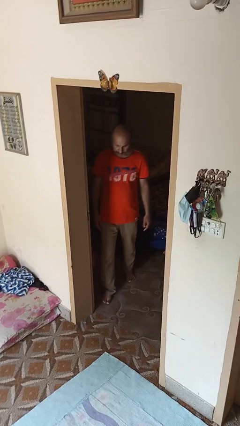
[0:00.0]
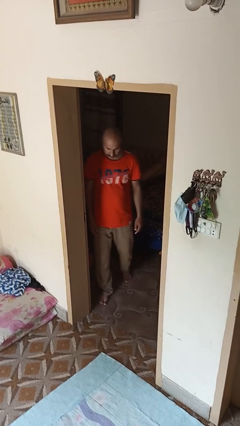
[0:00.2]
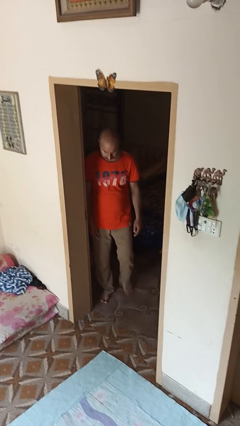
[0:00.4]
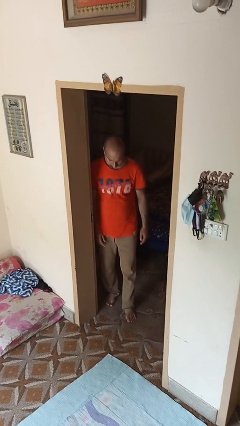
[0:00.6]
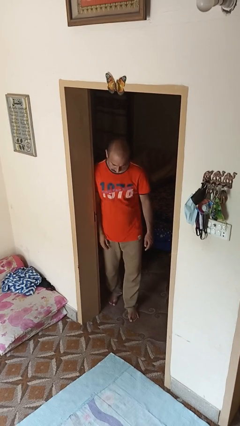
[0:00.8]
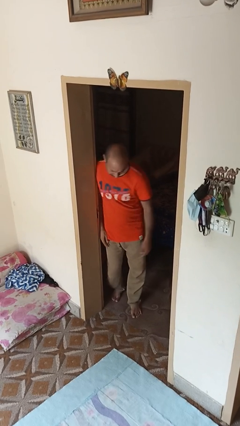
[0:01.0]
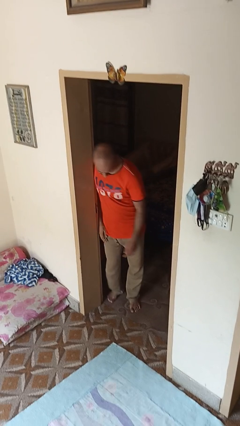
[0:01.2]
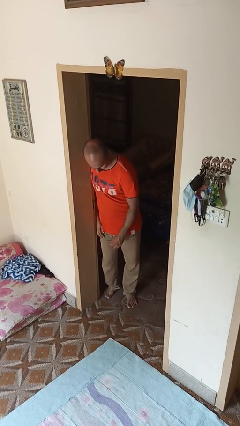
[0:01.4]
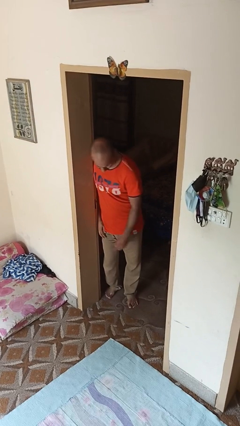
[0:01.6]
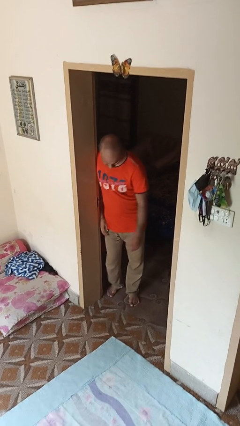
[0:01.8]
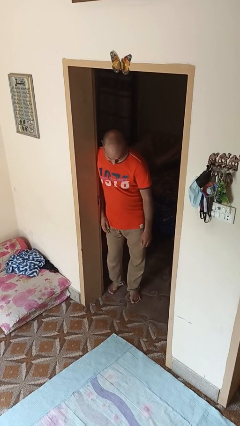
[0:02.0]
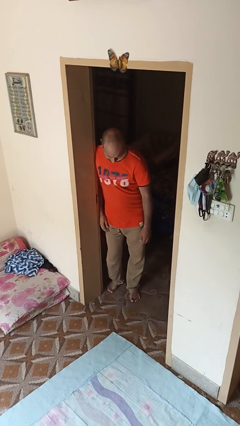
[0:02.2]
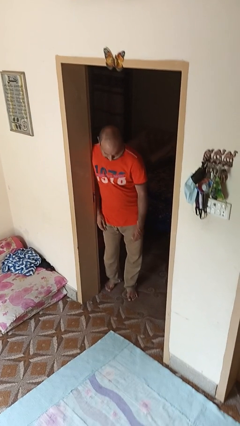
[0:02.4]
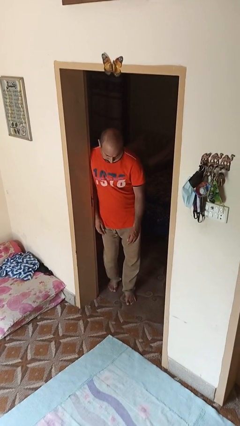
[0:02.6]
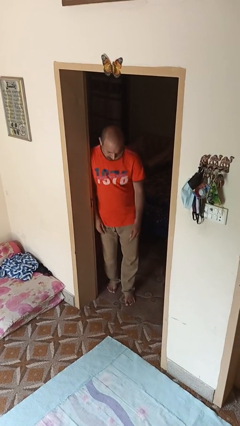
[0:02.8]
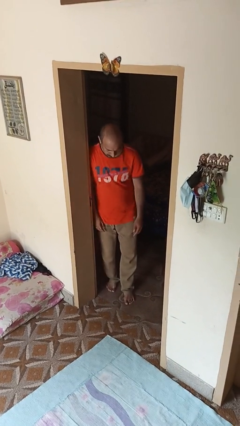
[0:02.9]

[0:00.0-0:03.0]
person bumps into wall

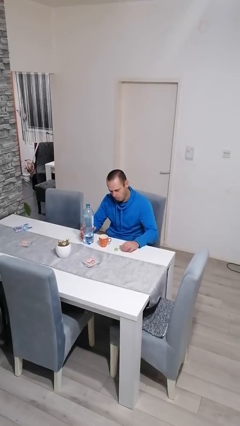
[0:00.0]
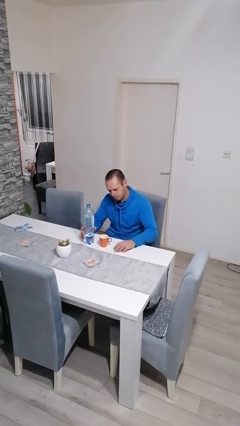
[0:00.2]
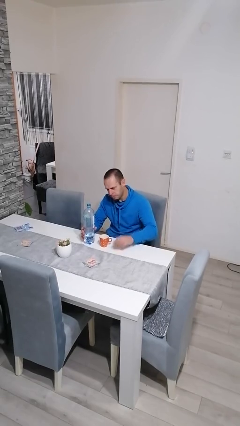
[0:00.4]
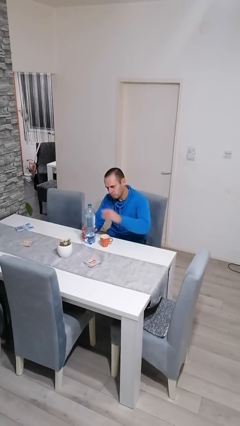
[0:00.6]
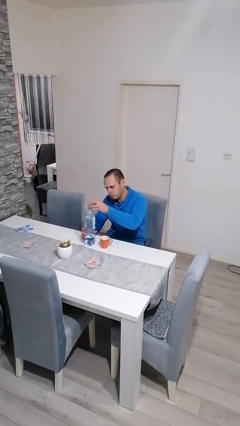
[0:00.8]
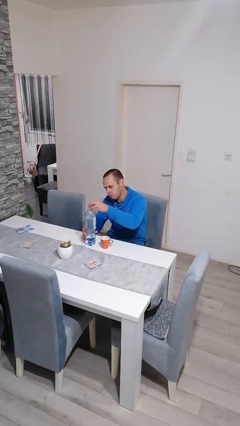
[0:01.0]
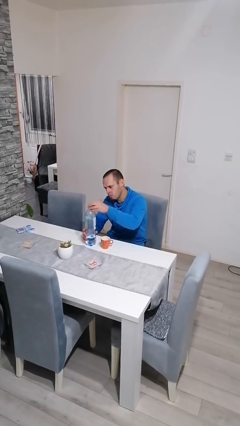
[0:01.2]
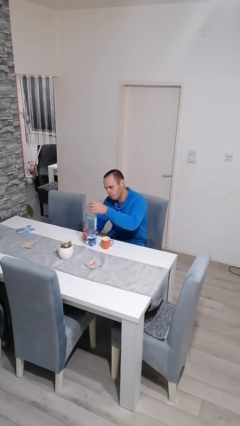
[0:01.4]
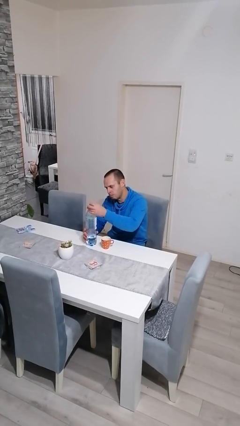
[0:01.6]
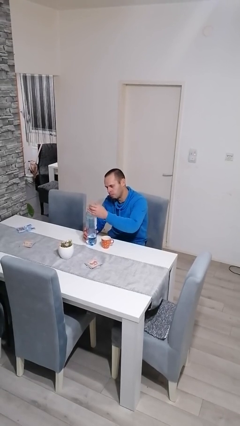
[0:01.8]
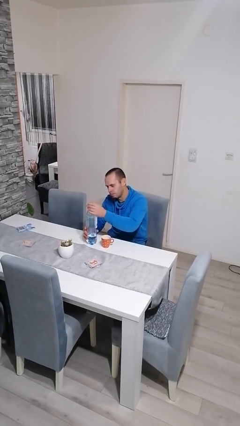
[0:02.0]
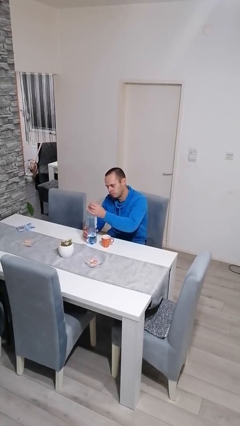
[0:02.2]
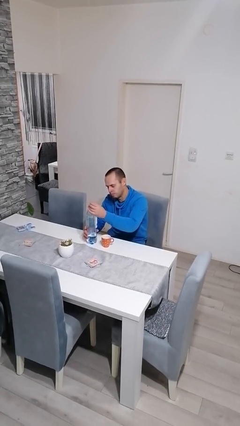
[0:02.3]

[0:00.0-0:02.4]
person screws lid to bottle

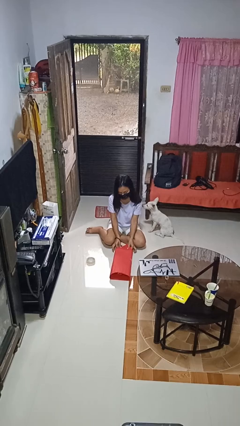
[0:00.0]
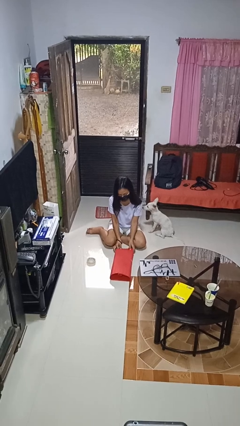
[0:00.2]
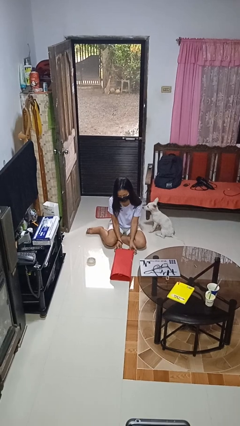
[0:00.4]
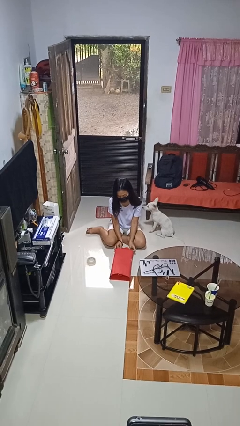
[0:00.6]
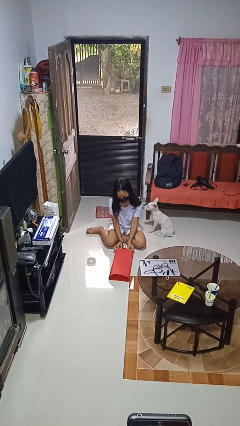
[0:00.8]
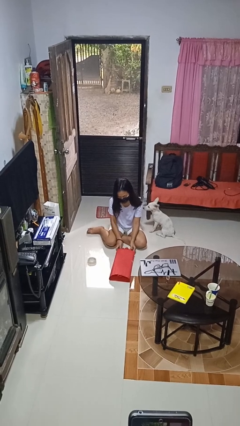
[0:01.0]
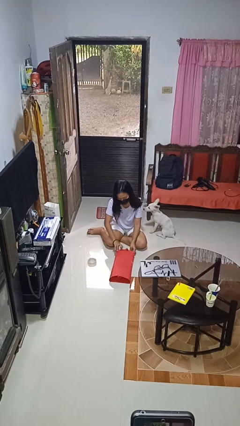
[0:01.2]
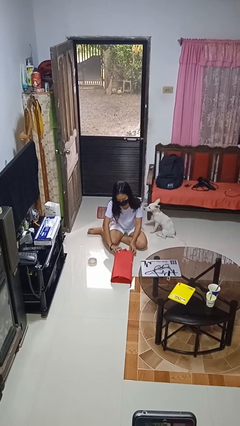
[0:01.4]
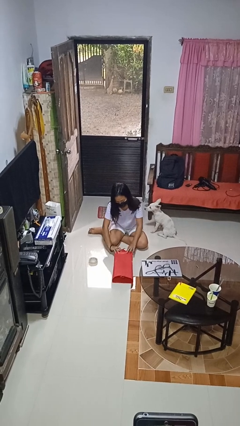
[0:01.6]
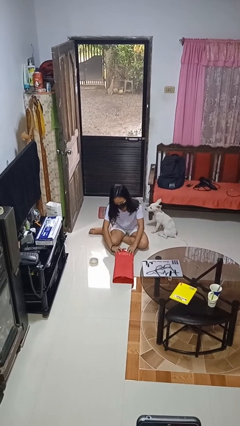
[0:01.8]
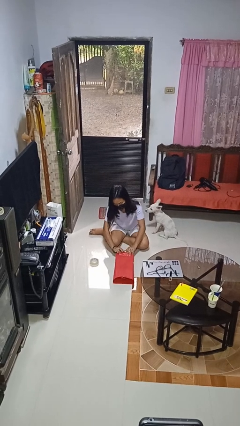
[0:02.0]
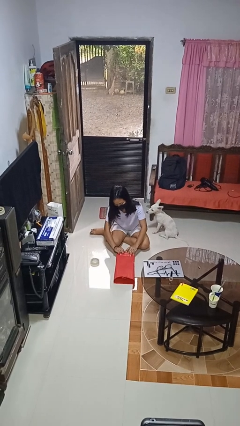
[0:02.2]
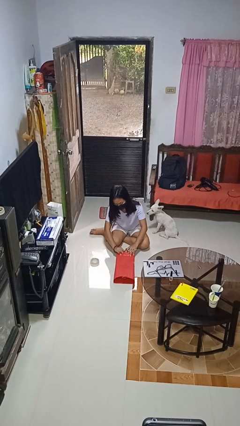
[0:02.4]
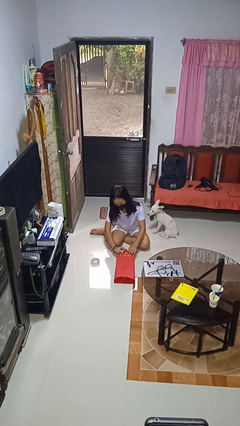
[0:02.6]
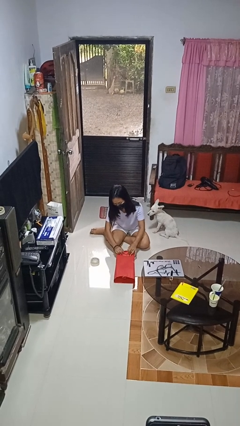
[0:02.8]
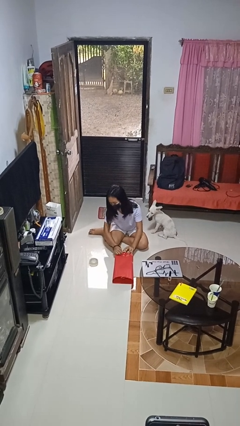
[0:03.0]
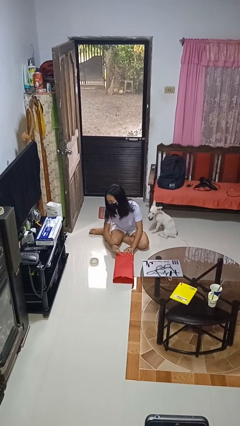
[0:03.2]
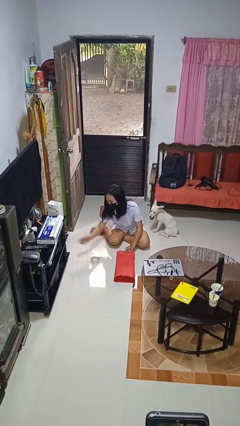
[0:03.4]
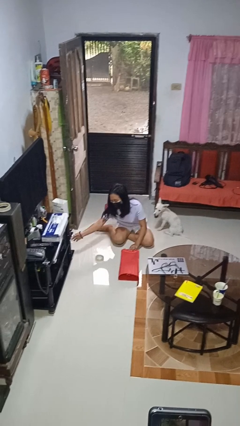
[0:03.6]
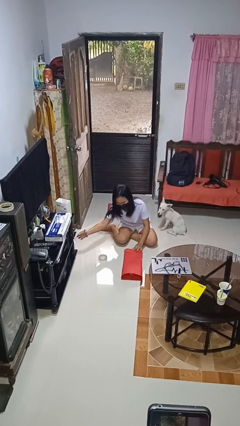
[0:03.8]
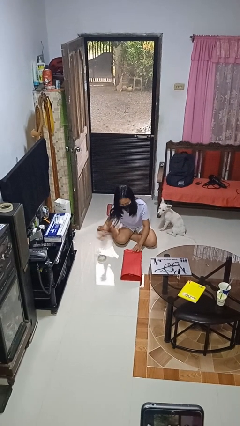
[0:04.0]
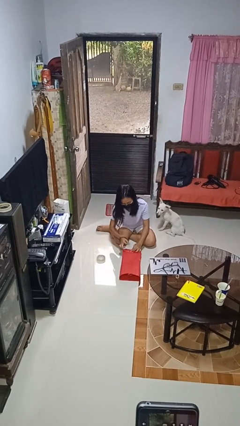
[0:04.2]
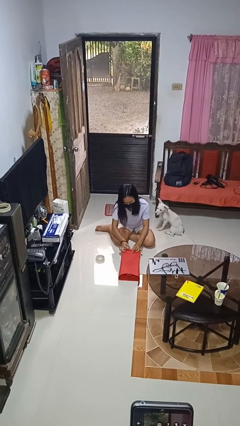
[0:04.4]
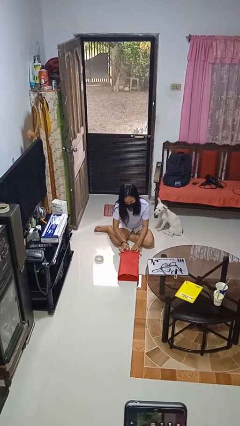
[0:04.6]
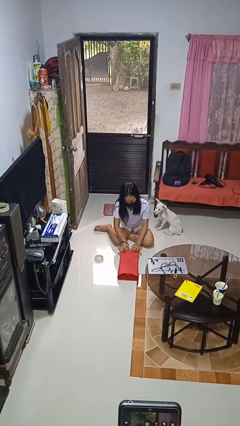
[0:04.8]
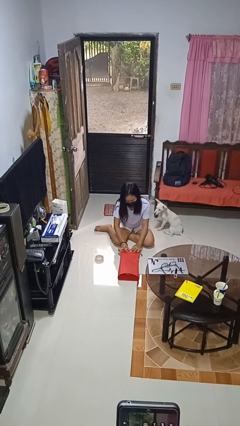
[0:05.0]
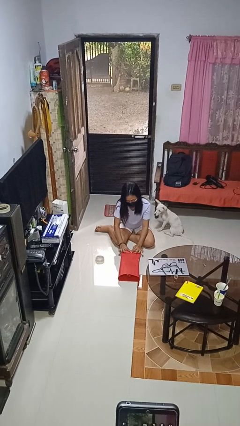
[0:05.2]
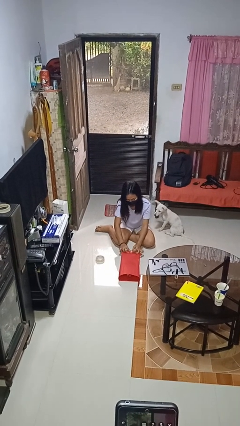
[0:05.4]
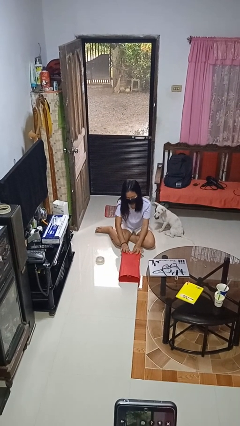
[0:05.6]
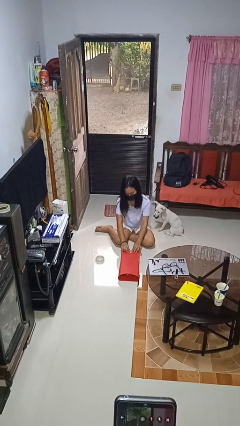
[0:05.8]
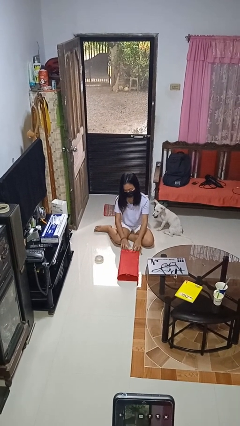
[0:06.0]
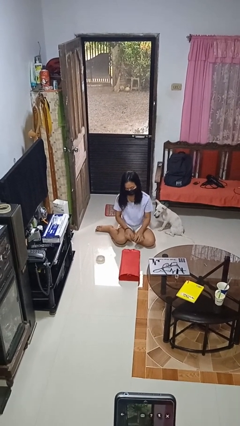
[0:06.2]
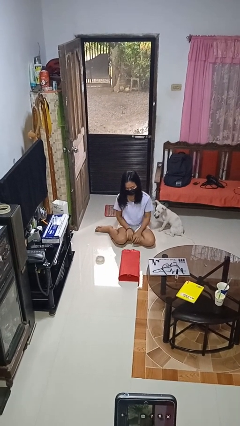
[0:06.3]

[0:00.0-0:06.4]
person wraps box

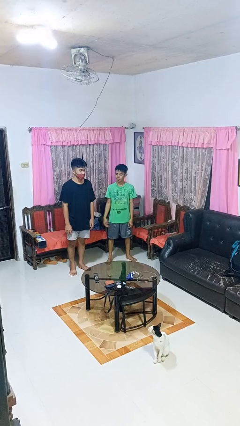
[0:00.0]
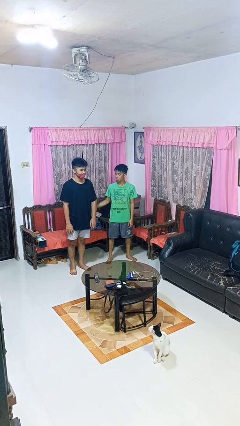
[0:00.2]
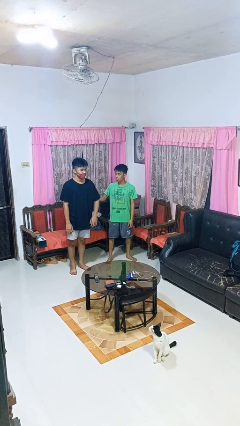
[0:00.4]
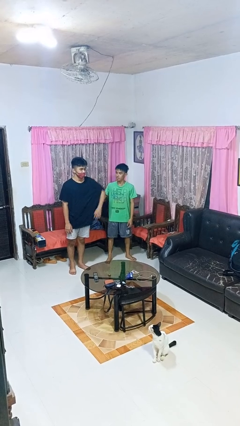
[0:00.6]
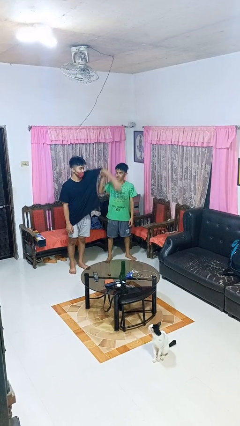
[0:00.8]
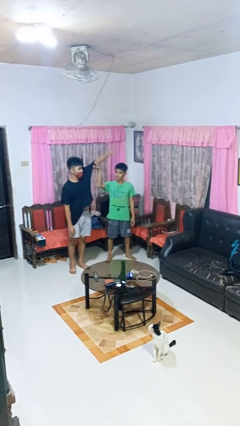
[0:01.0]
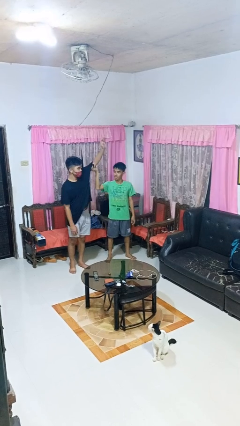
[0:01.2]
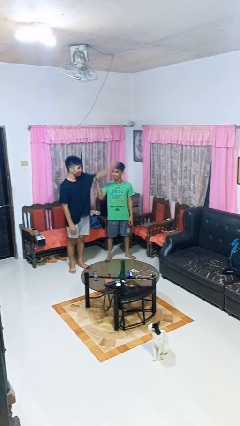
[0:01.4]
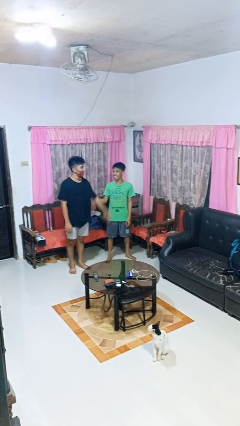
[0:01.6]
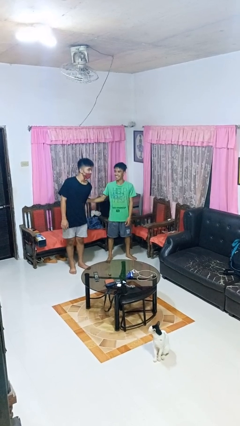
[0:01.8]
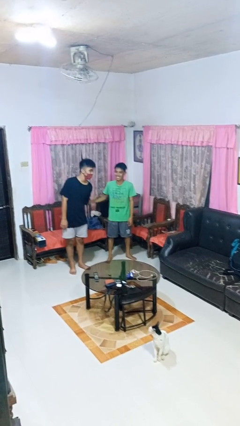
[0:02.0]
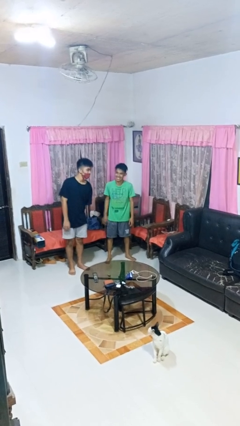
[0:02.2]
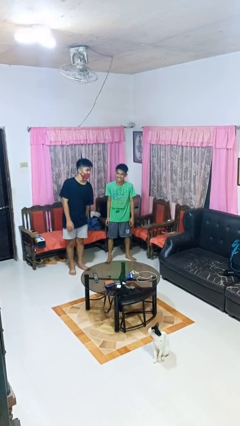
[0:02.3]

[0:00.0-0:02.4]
person grabs person by bicep

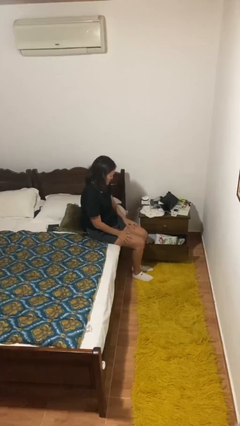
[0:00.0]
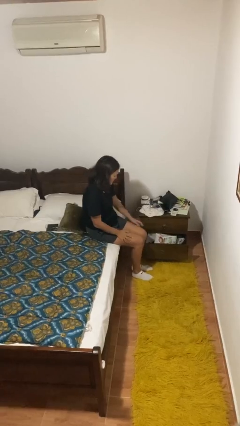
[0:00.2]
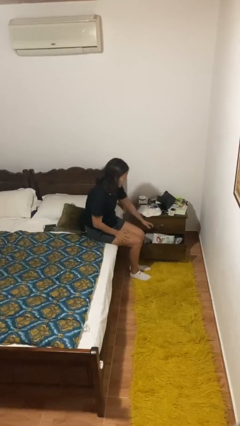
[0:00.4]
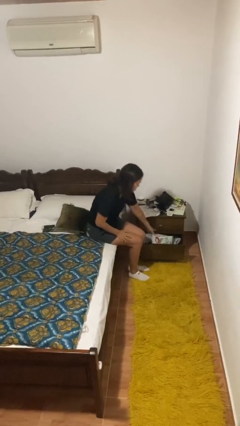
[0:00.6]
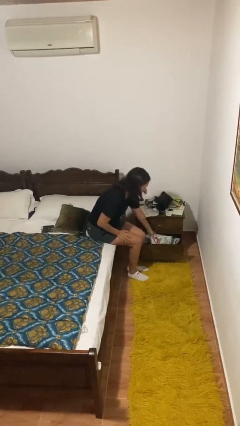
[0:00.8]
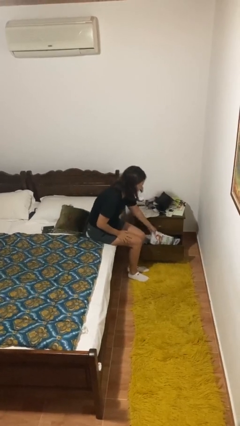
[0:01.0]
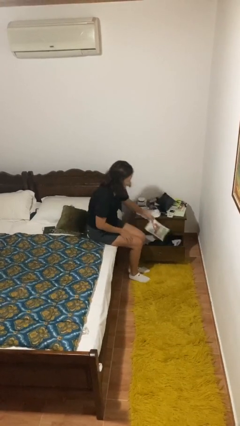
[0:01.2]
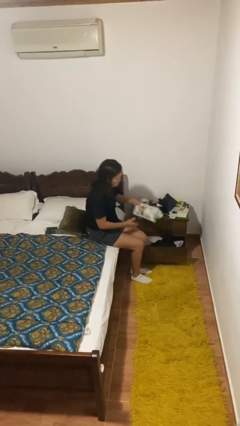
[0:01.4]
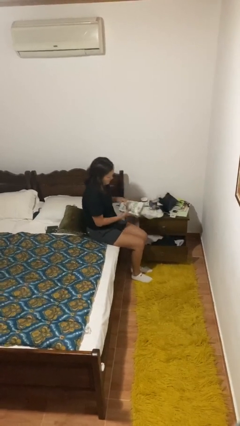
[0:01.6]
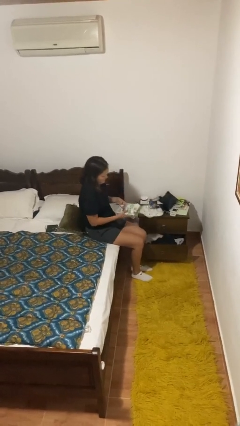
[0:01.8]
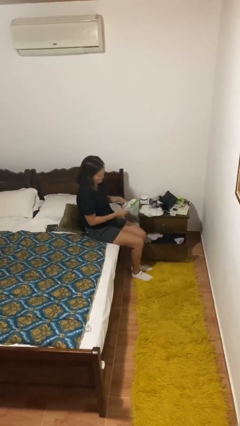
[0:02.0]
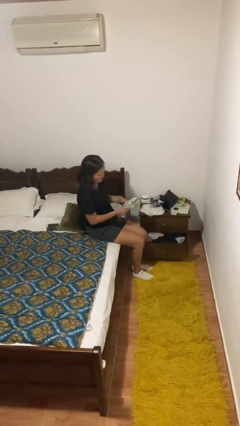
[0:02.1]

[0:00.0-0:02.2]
person picks up object from cabinet

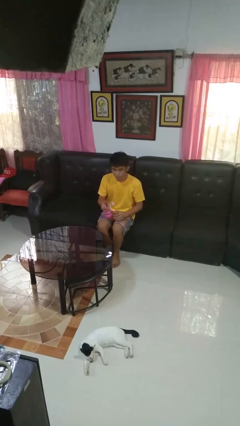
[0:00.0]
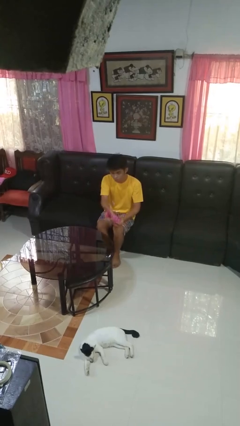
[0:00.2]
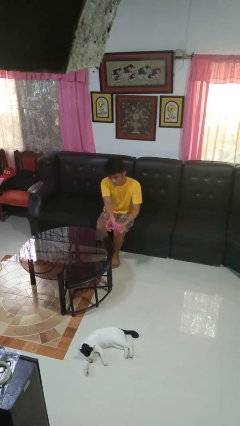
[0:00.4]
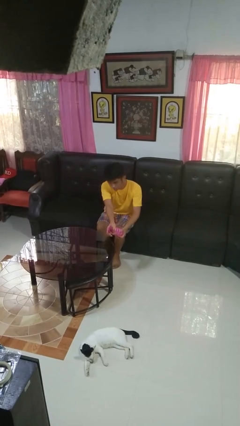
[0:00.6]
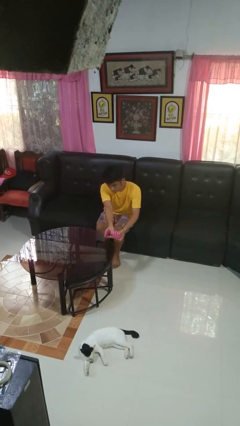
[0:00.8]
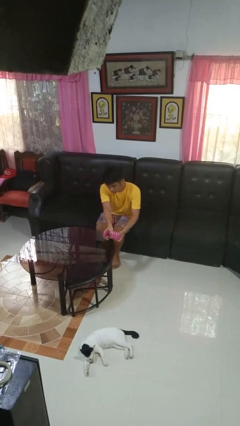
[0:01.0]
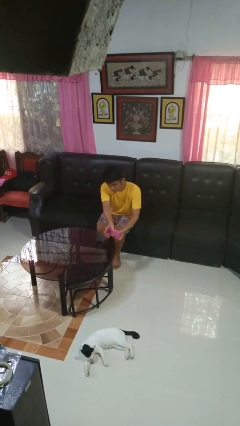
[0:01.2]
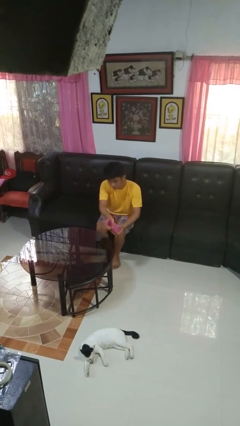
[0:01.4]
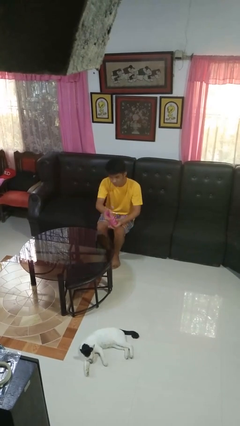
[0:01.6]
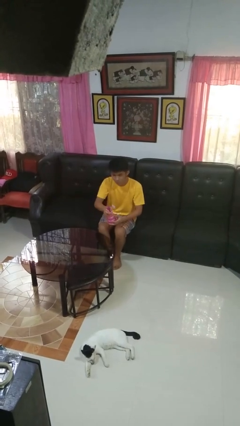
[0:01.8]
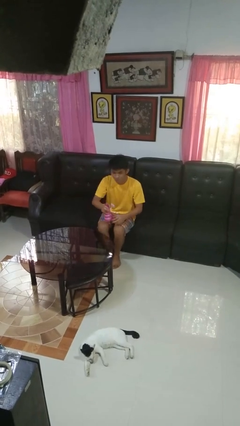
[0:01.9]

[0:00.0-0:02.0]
person sprays from bottle
